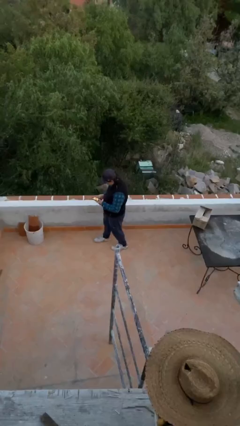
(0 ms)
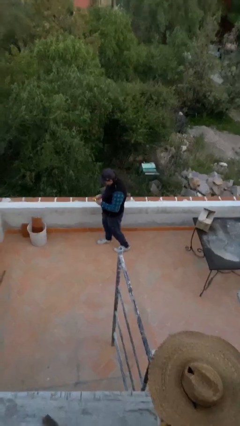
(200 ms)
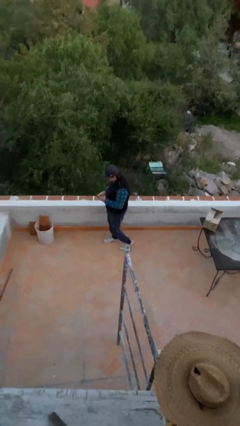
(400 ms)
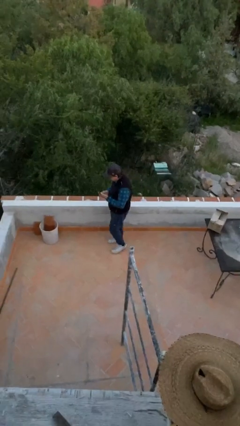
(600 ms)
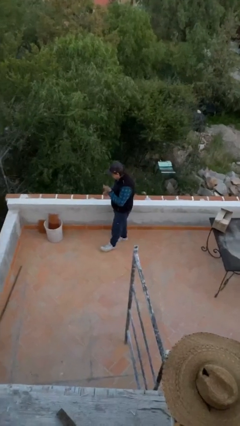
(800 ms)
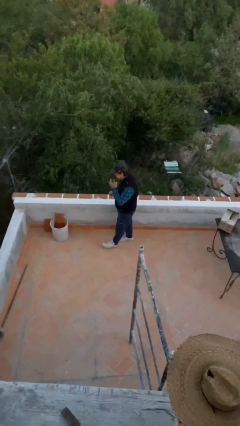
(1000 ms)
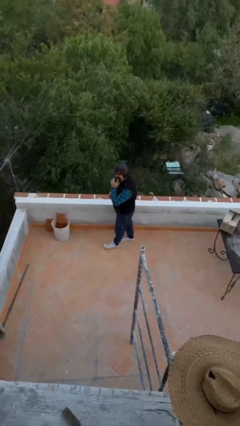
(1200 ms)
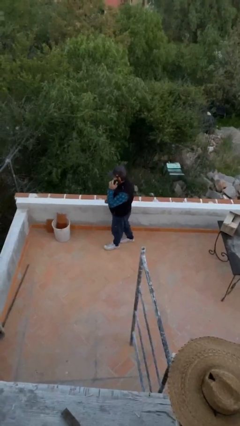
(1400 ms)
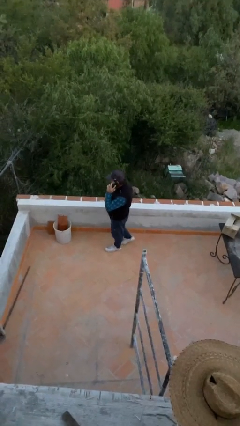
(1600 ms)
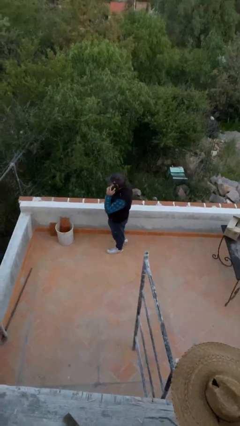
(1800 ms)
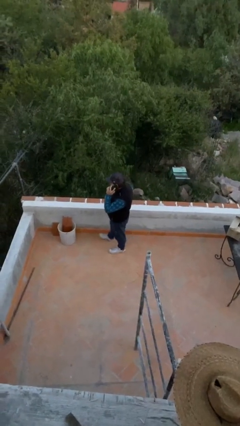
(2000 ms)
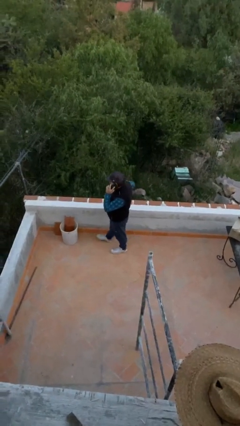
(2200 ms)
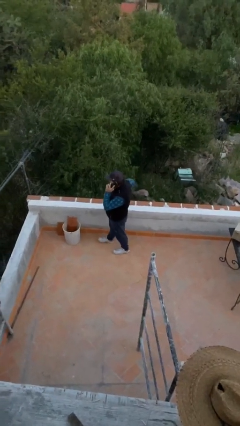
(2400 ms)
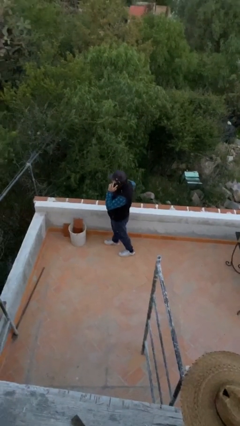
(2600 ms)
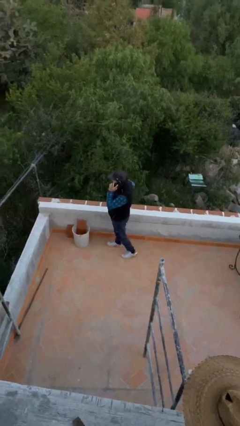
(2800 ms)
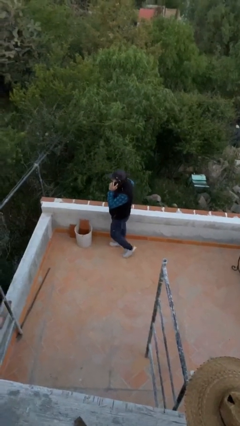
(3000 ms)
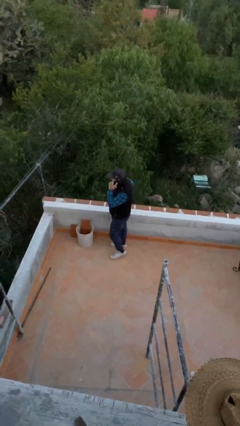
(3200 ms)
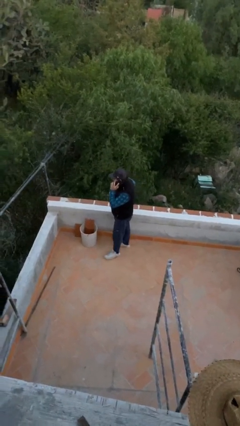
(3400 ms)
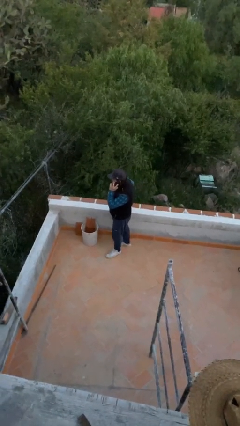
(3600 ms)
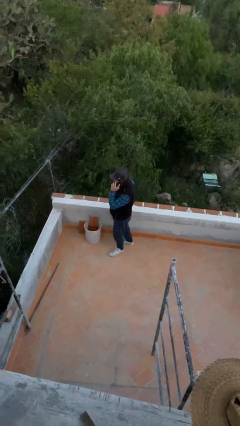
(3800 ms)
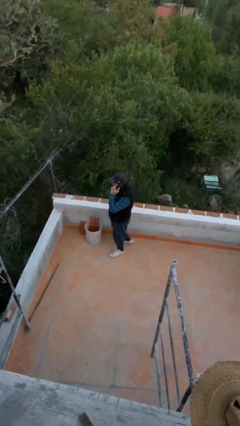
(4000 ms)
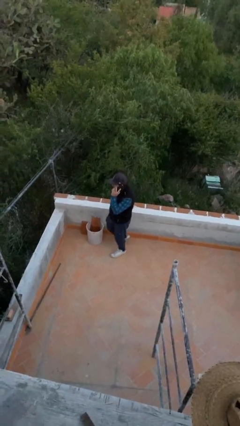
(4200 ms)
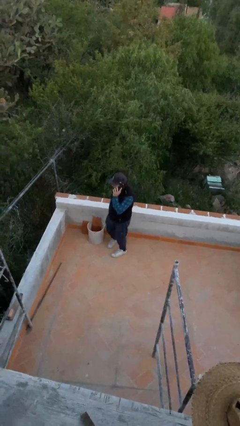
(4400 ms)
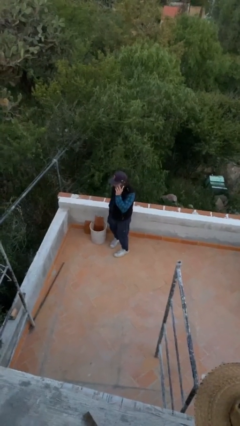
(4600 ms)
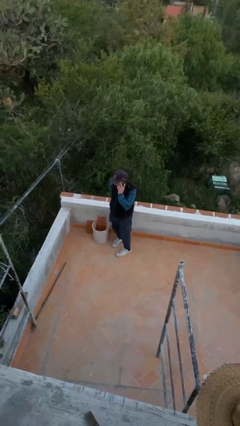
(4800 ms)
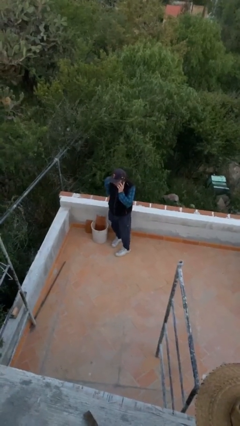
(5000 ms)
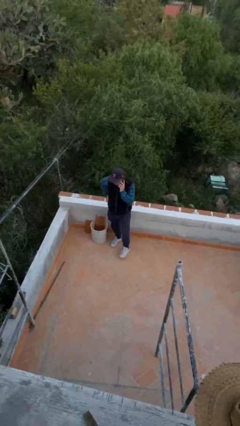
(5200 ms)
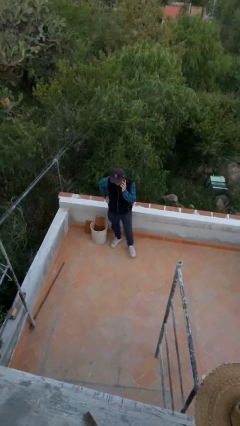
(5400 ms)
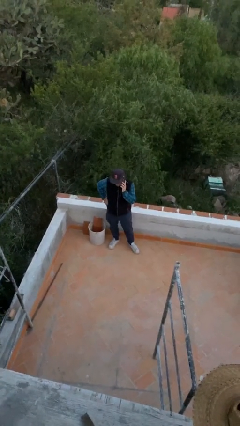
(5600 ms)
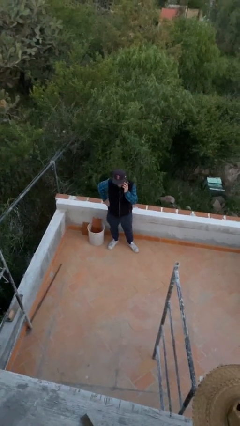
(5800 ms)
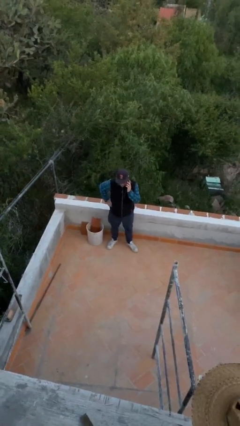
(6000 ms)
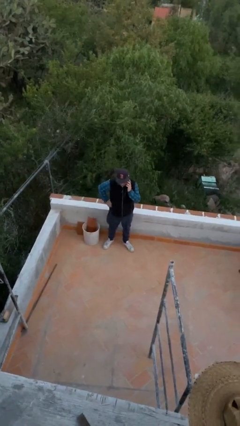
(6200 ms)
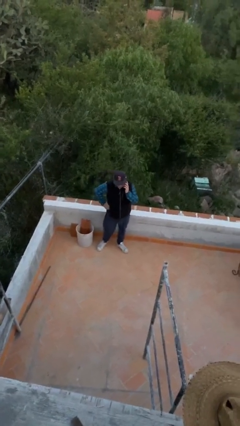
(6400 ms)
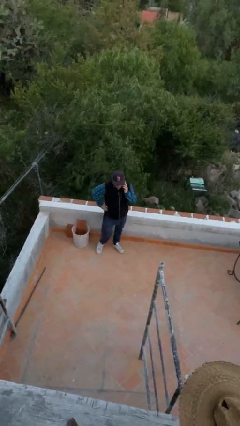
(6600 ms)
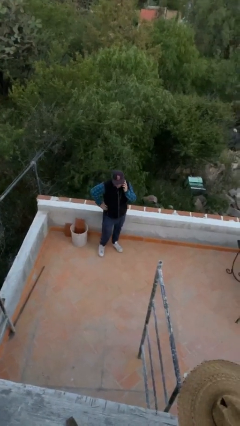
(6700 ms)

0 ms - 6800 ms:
person talks on phone

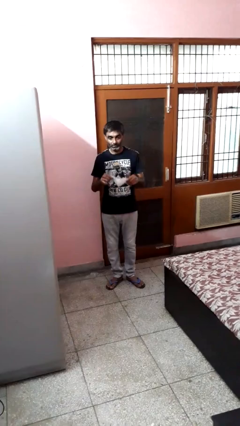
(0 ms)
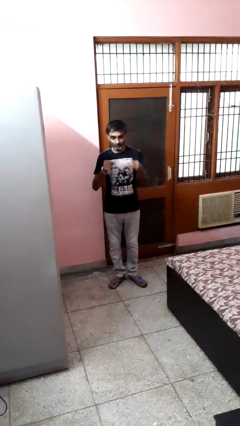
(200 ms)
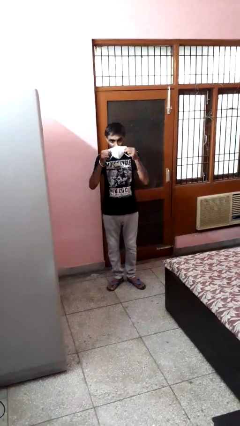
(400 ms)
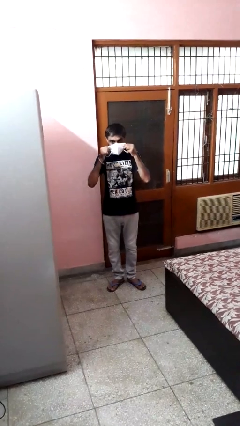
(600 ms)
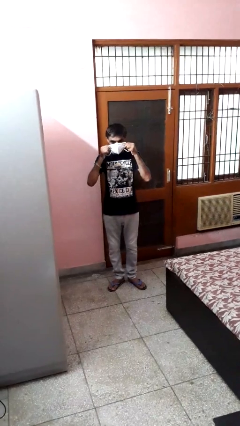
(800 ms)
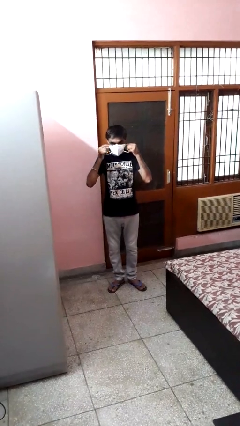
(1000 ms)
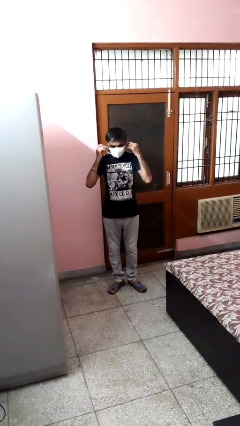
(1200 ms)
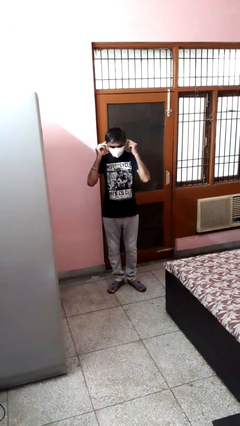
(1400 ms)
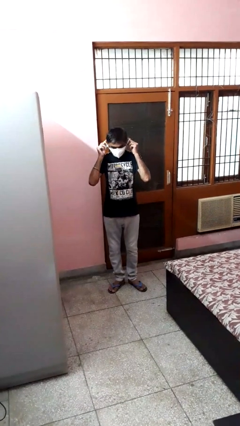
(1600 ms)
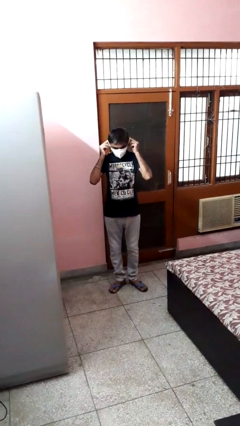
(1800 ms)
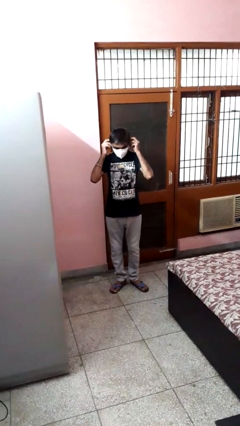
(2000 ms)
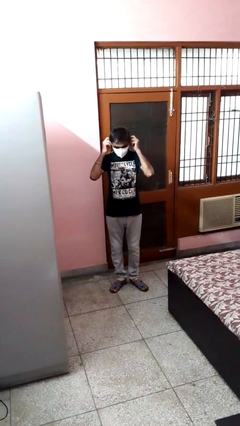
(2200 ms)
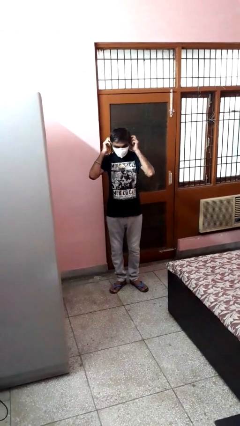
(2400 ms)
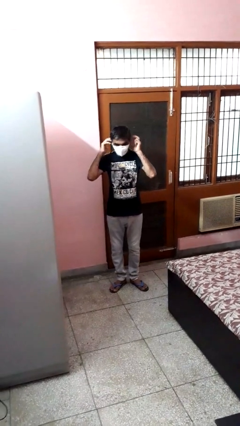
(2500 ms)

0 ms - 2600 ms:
person puts on facemask

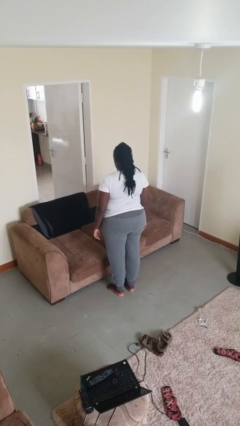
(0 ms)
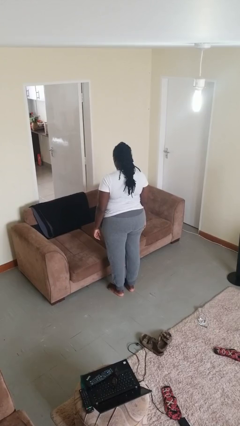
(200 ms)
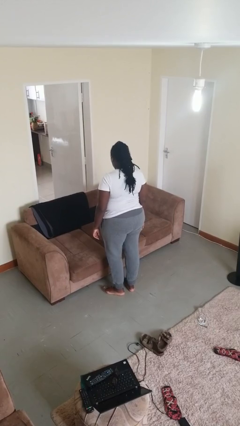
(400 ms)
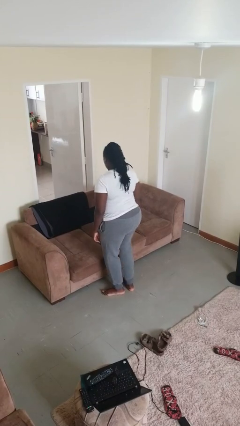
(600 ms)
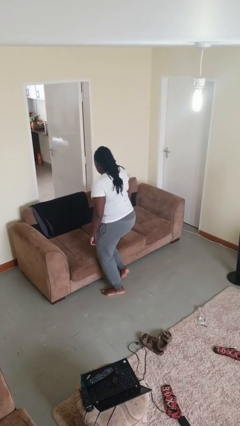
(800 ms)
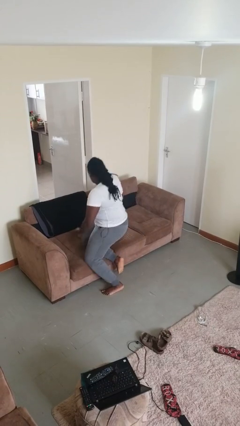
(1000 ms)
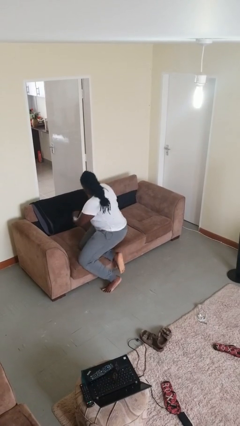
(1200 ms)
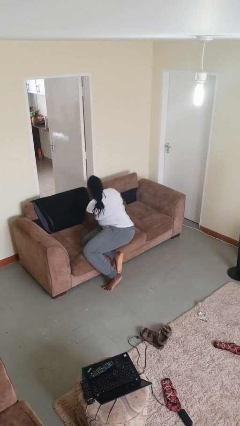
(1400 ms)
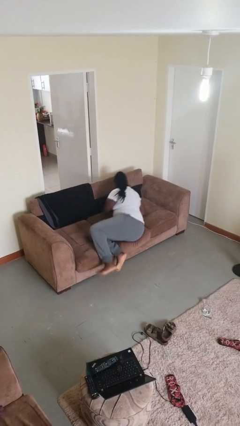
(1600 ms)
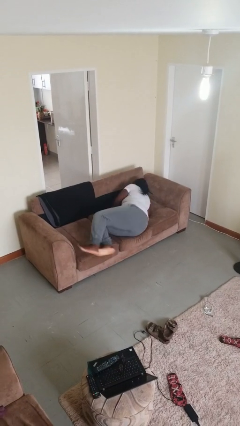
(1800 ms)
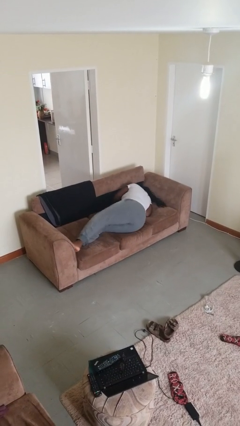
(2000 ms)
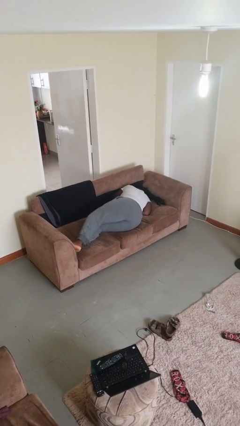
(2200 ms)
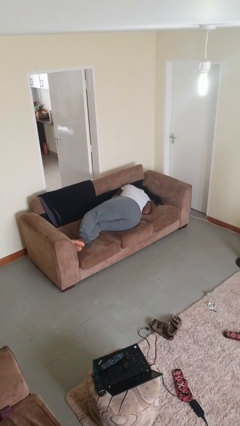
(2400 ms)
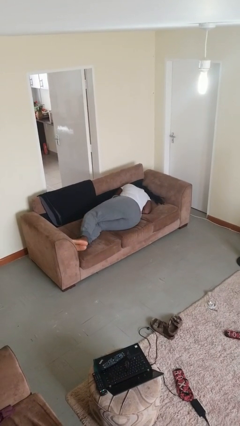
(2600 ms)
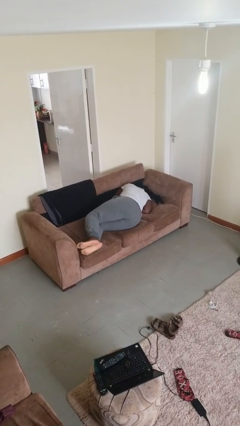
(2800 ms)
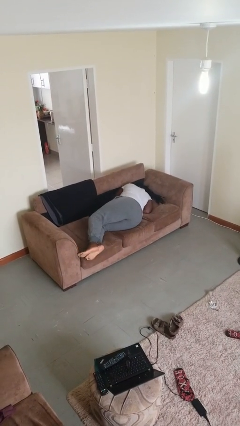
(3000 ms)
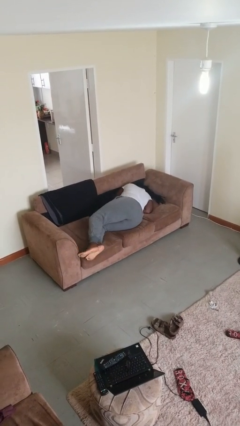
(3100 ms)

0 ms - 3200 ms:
person lies down on bed

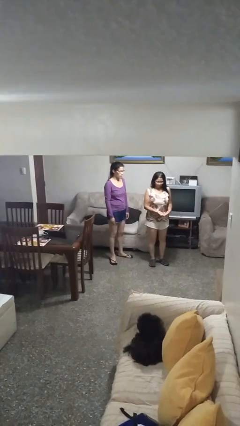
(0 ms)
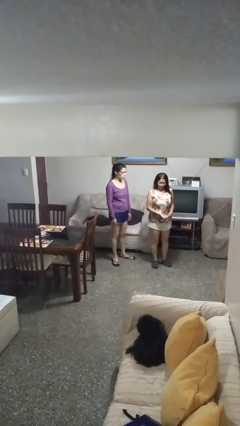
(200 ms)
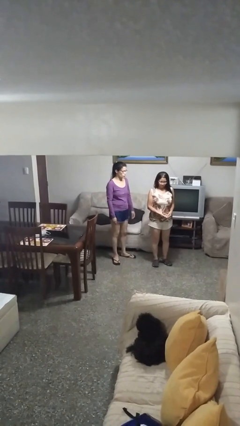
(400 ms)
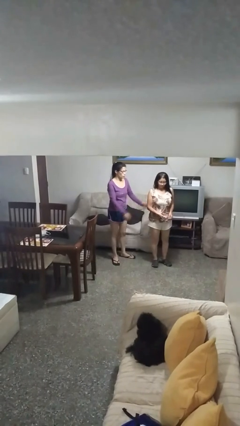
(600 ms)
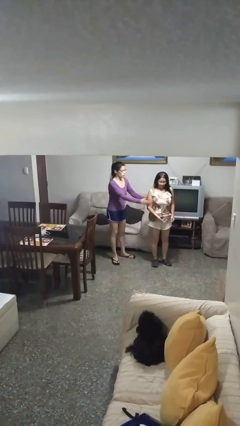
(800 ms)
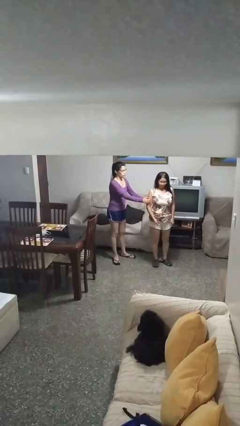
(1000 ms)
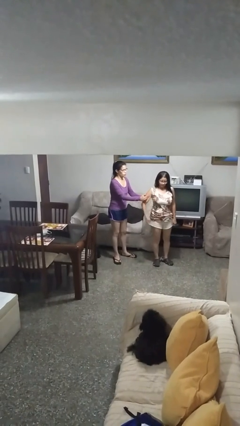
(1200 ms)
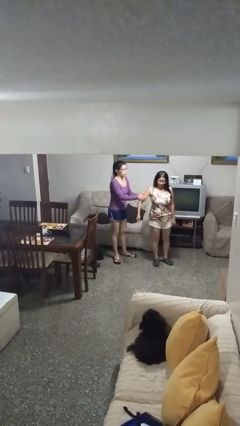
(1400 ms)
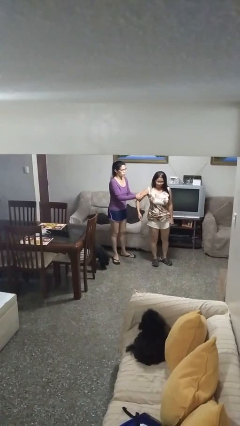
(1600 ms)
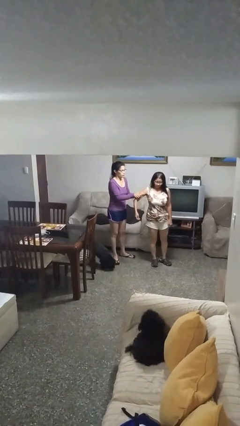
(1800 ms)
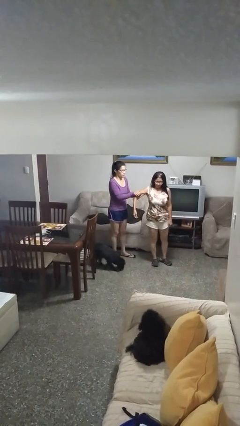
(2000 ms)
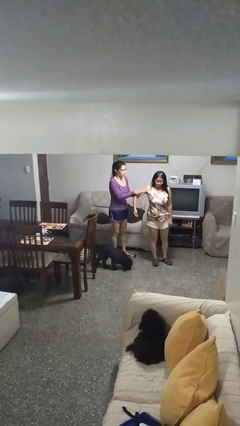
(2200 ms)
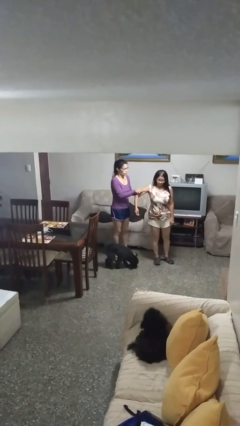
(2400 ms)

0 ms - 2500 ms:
person grabs person by bicep

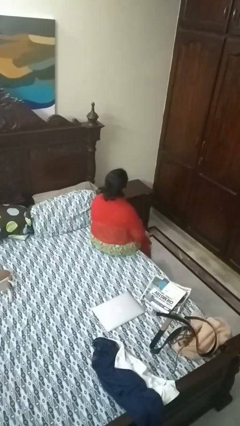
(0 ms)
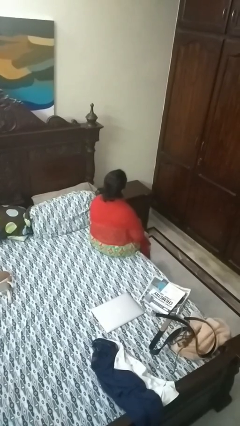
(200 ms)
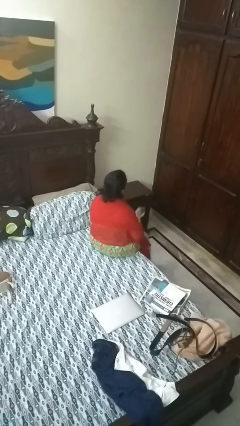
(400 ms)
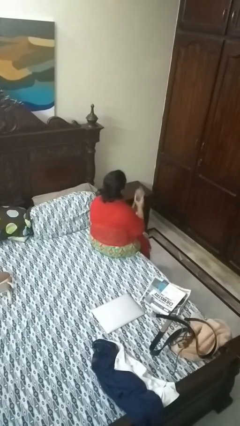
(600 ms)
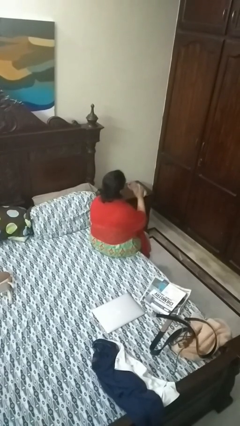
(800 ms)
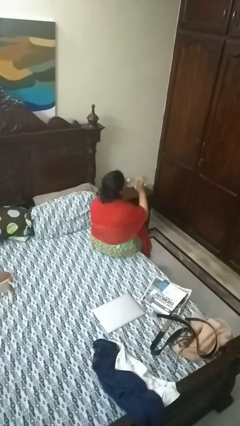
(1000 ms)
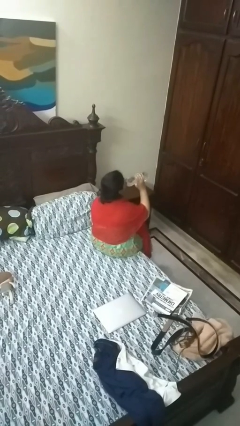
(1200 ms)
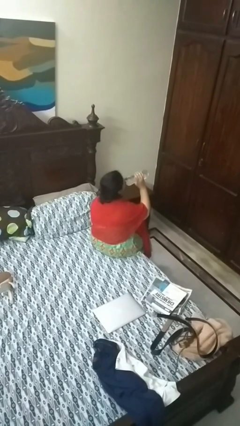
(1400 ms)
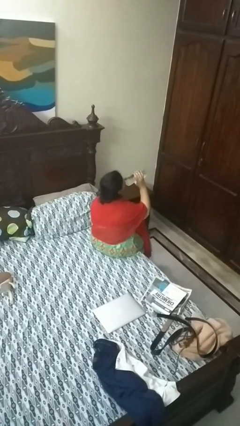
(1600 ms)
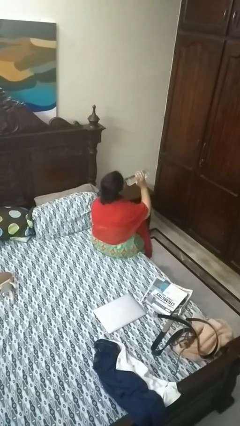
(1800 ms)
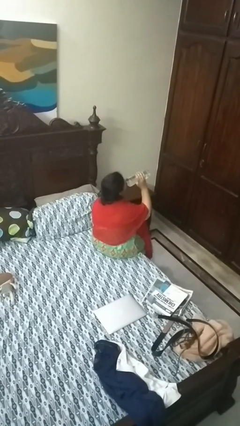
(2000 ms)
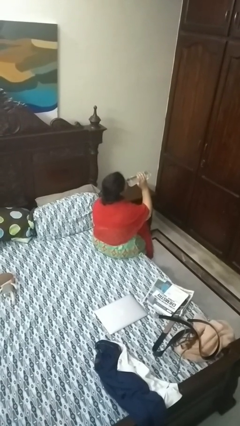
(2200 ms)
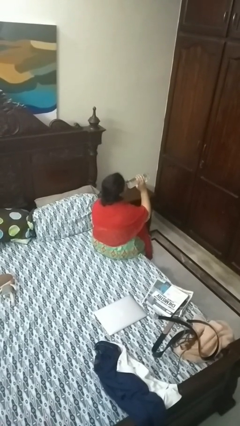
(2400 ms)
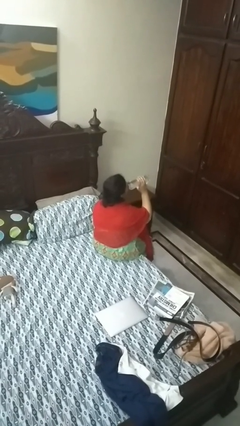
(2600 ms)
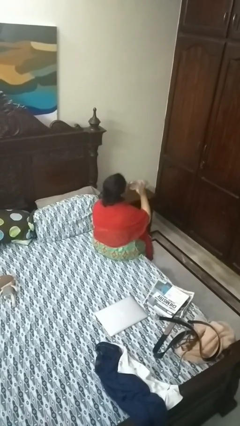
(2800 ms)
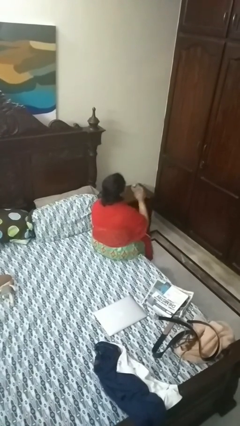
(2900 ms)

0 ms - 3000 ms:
person drinks from bottle
